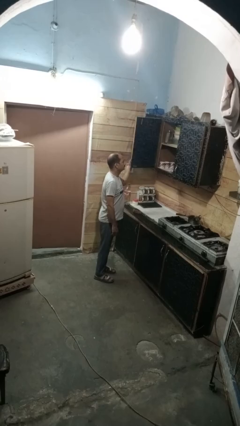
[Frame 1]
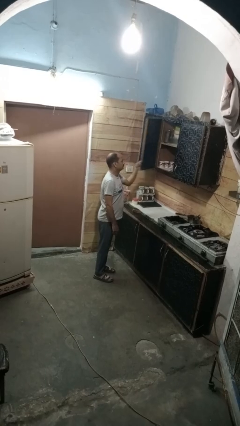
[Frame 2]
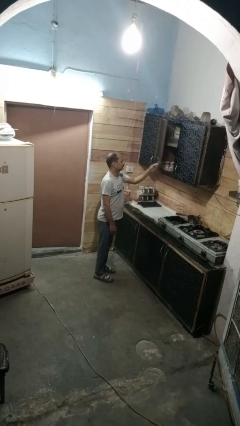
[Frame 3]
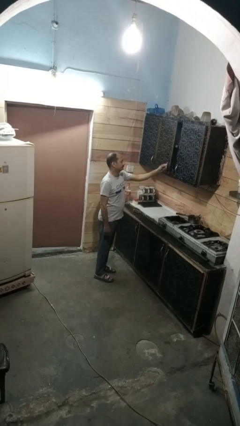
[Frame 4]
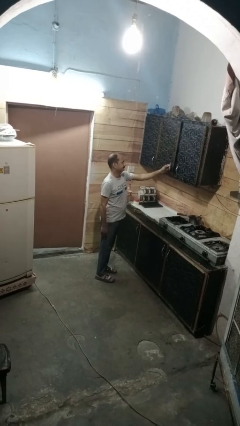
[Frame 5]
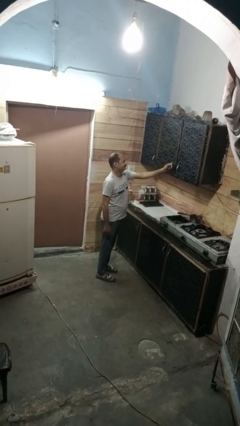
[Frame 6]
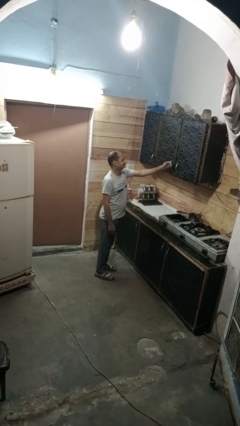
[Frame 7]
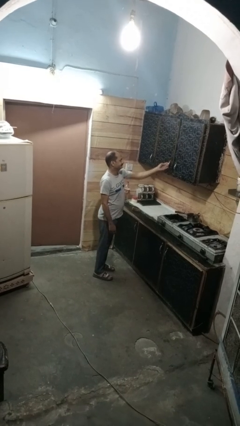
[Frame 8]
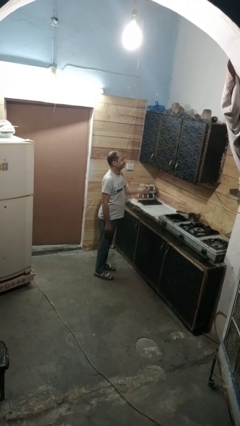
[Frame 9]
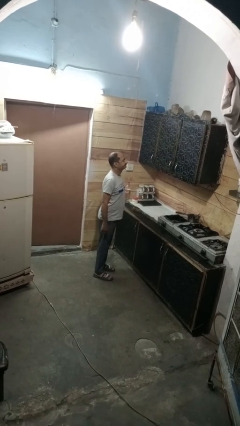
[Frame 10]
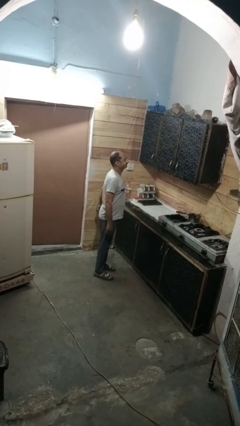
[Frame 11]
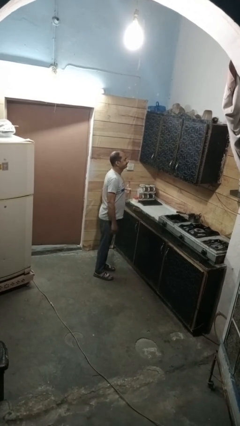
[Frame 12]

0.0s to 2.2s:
person closes cabinet

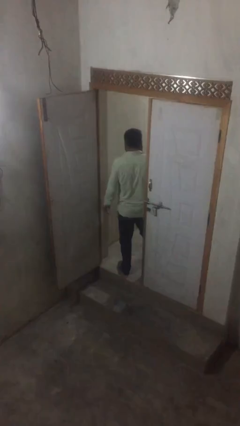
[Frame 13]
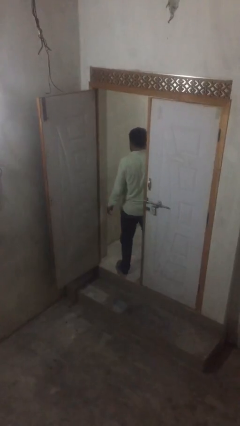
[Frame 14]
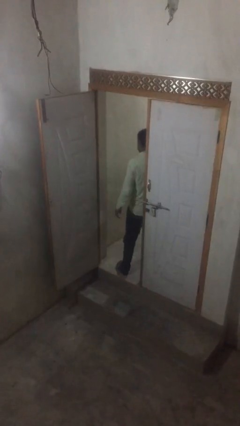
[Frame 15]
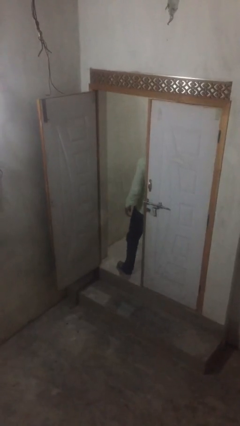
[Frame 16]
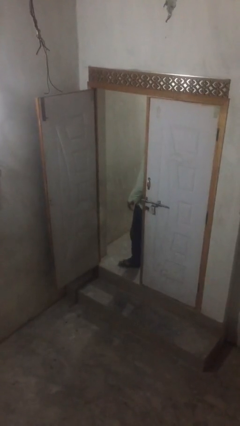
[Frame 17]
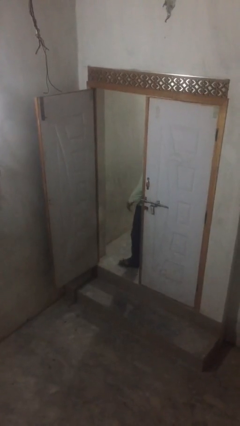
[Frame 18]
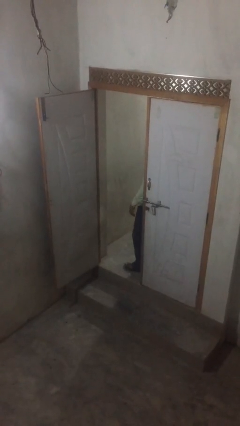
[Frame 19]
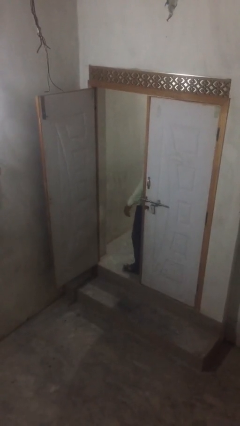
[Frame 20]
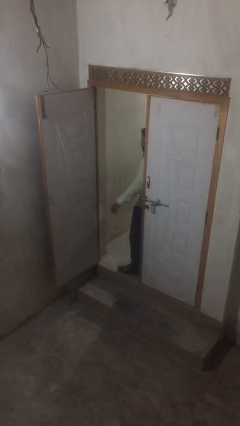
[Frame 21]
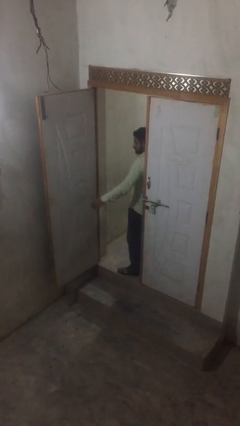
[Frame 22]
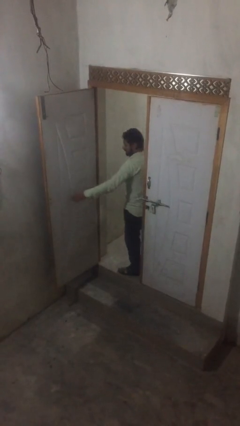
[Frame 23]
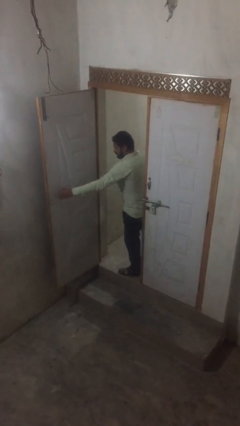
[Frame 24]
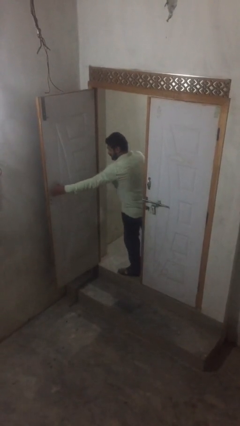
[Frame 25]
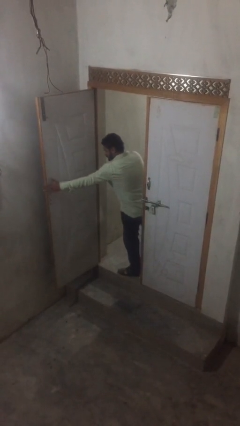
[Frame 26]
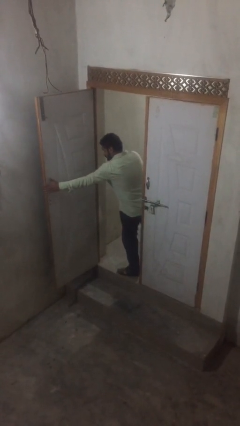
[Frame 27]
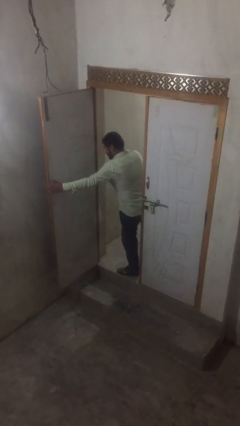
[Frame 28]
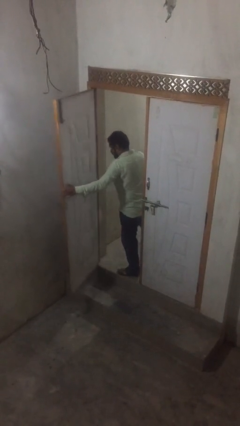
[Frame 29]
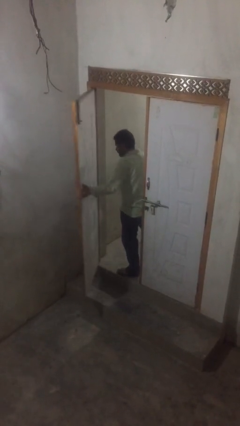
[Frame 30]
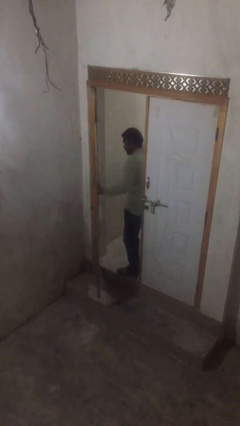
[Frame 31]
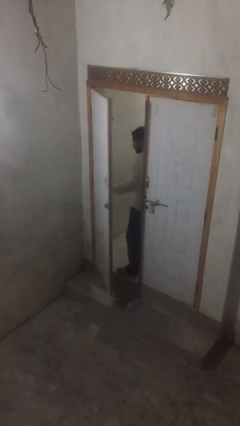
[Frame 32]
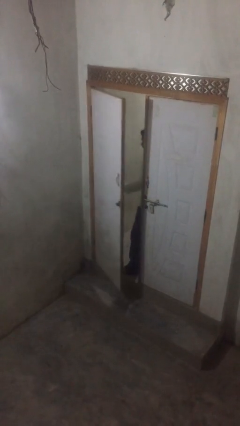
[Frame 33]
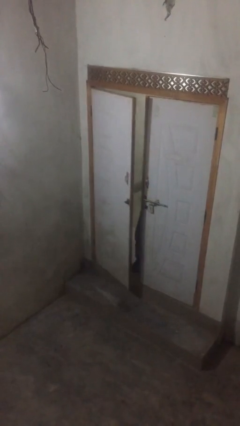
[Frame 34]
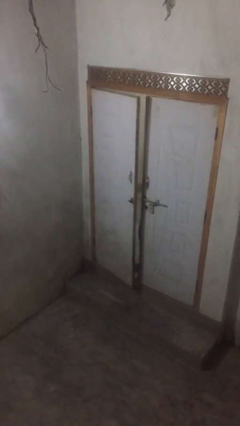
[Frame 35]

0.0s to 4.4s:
person closes facility door

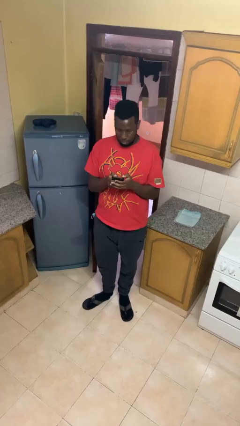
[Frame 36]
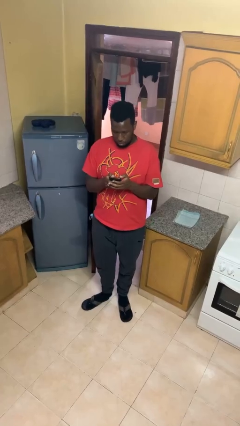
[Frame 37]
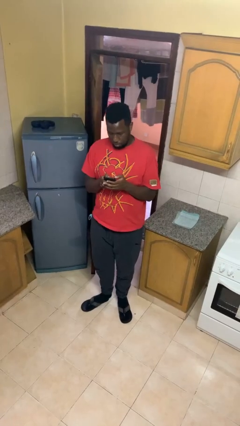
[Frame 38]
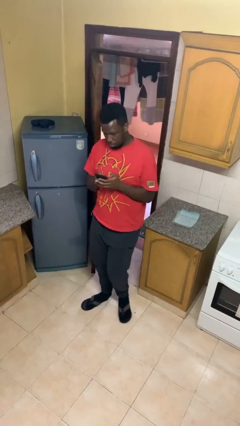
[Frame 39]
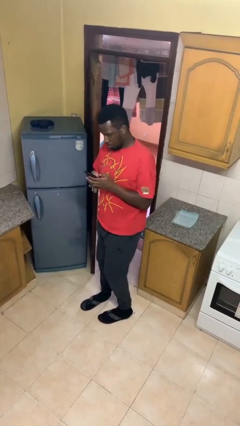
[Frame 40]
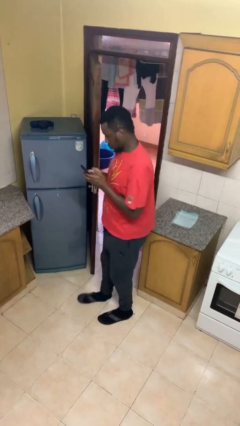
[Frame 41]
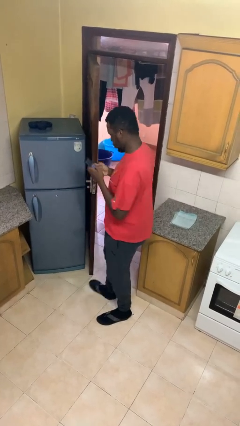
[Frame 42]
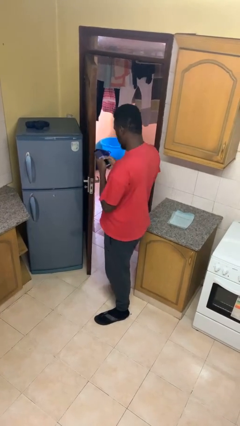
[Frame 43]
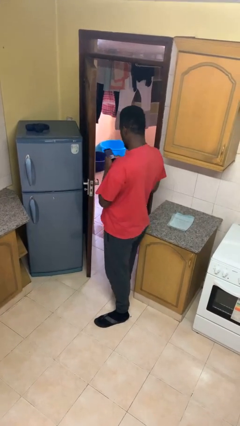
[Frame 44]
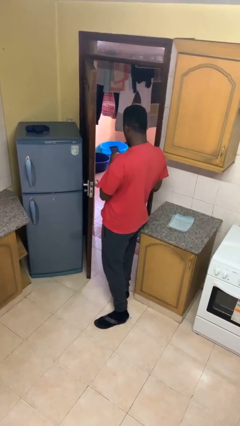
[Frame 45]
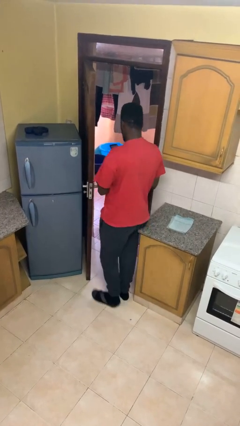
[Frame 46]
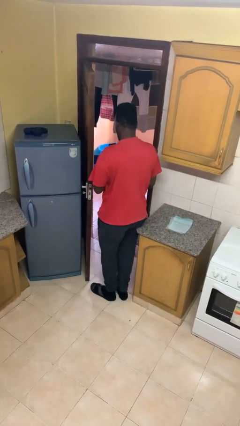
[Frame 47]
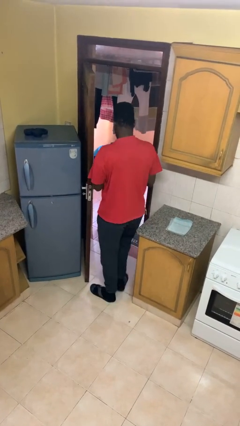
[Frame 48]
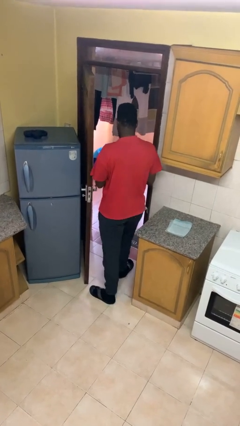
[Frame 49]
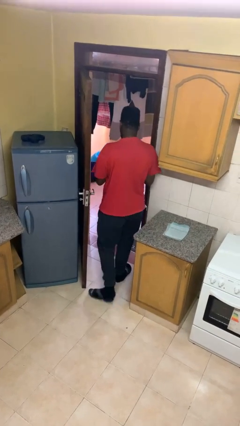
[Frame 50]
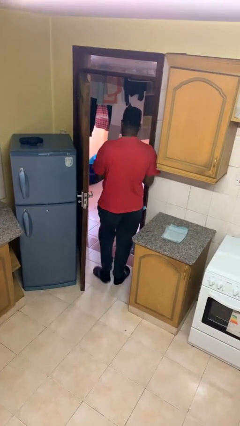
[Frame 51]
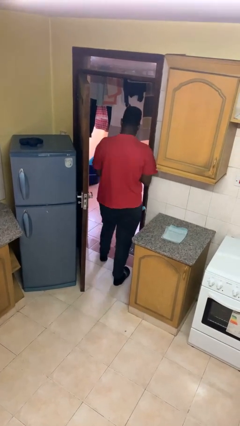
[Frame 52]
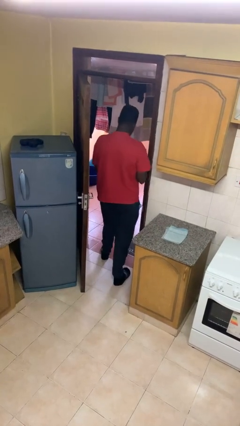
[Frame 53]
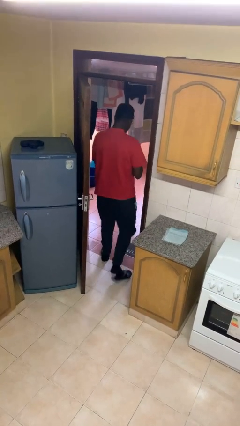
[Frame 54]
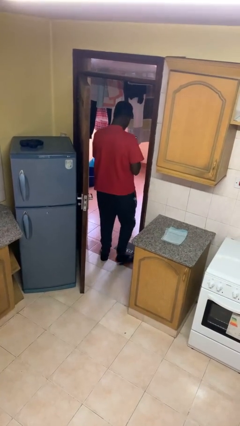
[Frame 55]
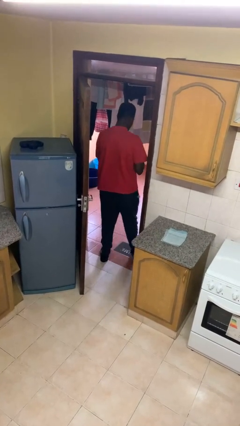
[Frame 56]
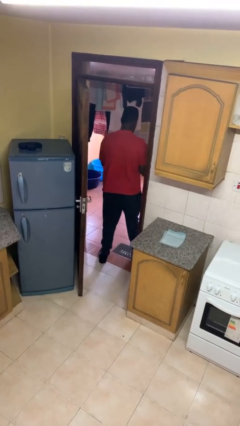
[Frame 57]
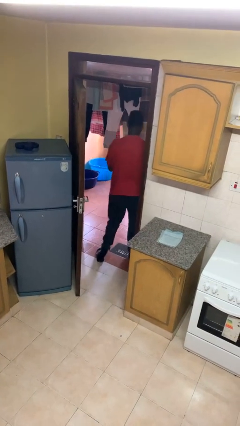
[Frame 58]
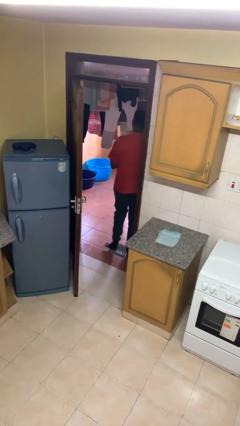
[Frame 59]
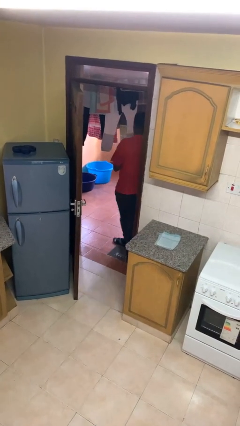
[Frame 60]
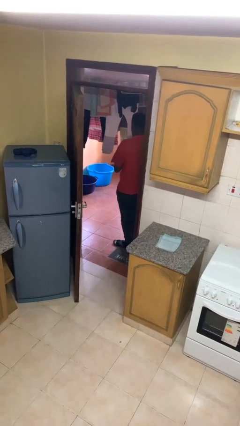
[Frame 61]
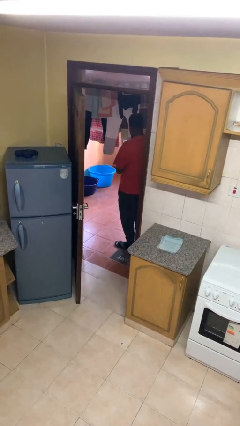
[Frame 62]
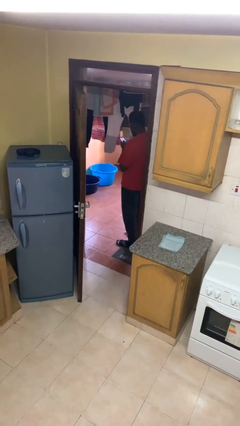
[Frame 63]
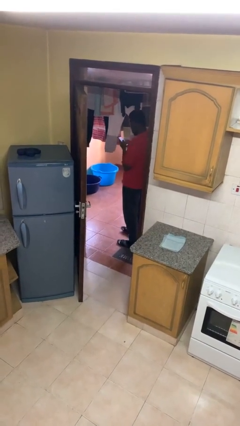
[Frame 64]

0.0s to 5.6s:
person exits scene through structure

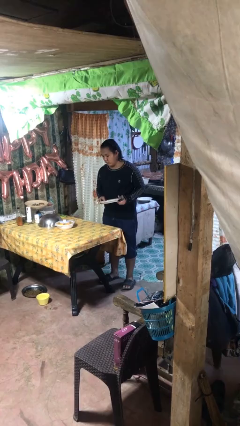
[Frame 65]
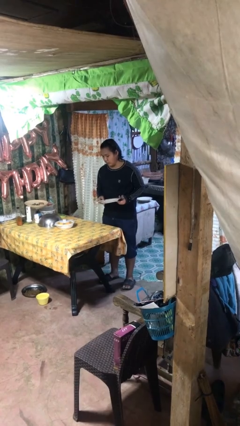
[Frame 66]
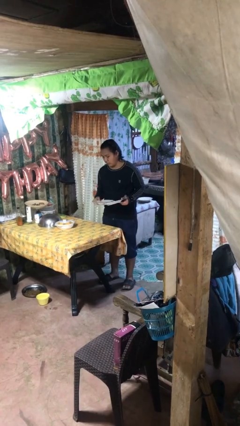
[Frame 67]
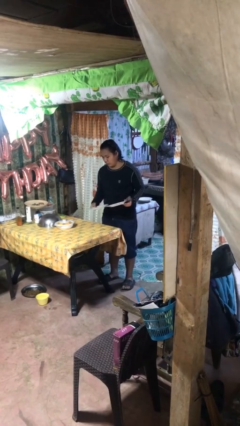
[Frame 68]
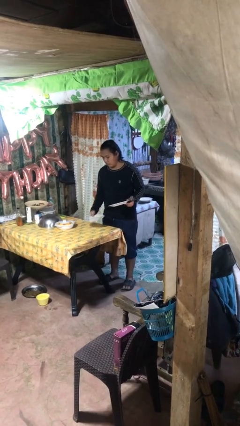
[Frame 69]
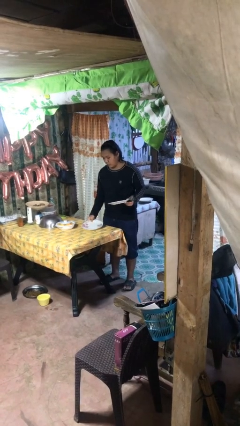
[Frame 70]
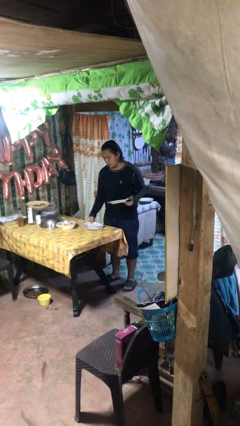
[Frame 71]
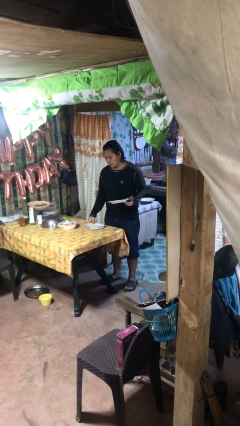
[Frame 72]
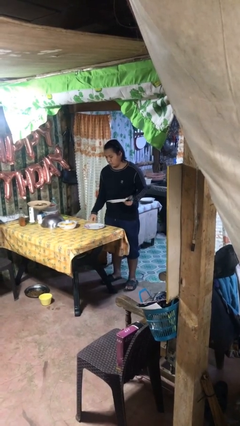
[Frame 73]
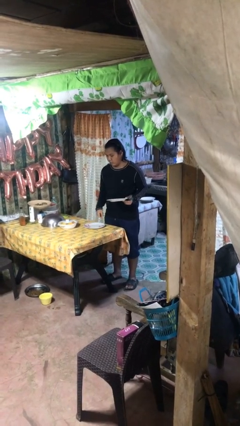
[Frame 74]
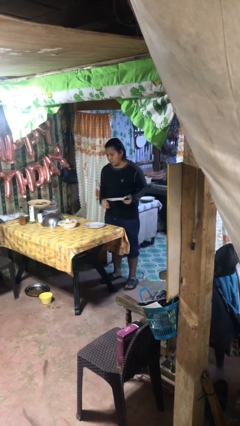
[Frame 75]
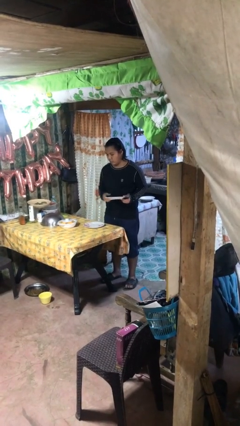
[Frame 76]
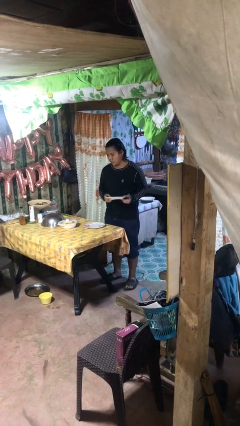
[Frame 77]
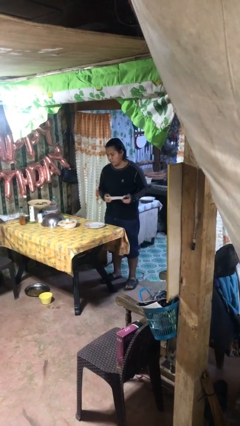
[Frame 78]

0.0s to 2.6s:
person sets table

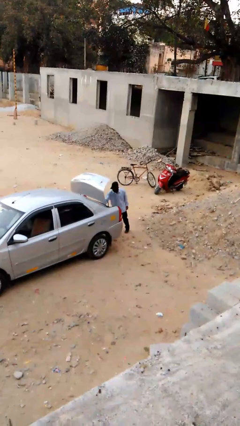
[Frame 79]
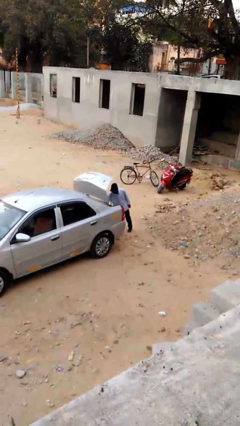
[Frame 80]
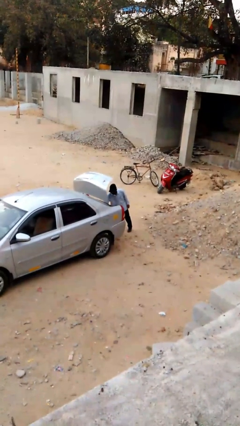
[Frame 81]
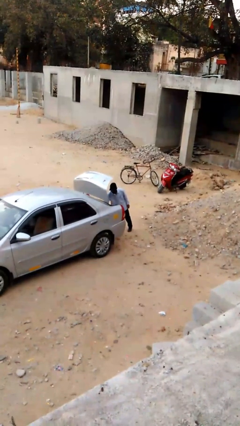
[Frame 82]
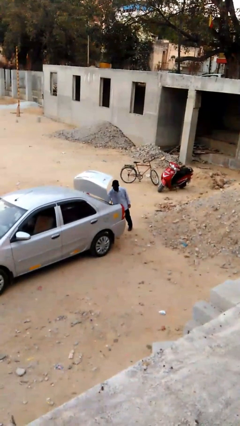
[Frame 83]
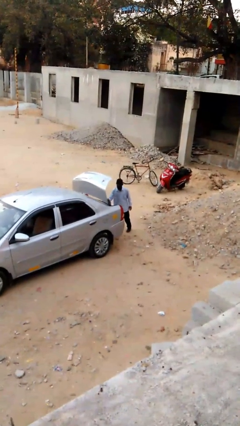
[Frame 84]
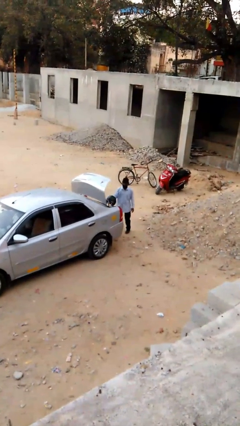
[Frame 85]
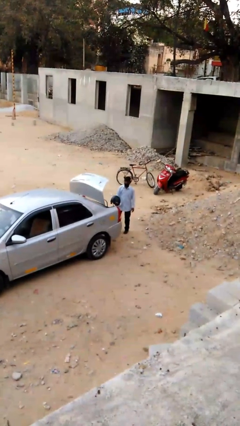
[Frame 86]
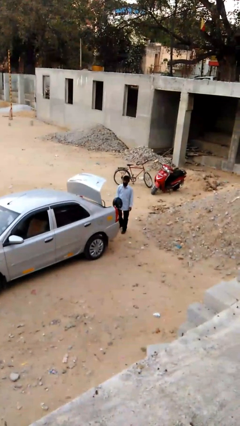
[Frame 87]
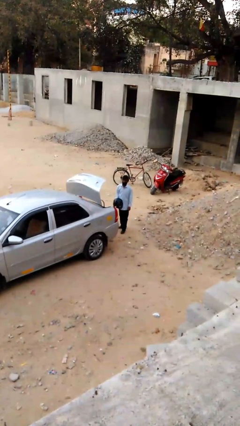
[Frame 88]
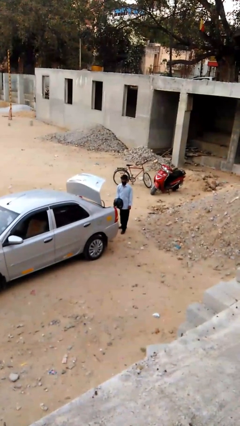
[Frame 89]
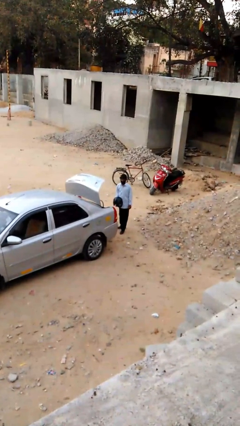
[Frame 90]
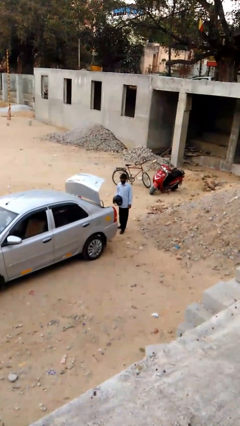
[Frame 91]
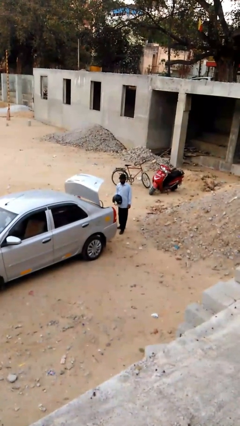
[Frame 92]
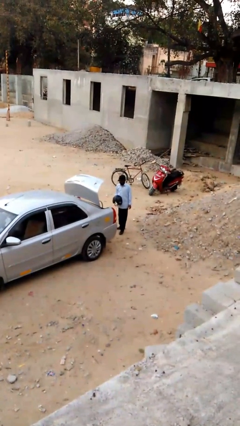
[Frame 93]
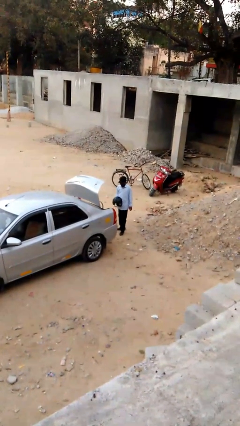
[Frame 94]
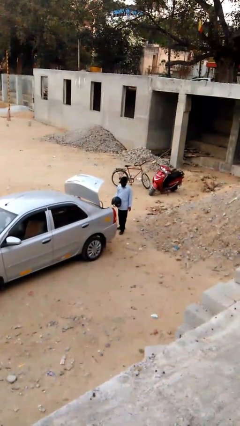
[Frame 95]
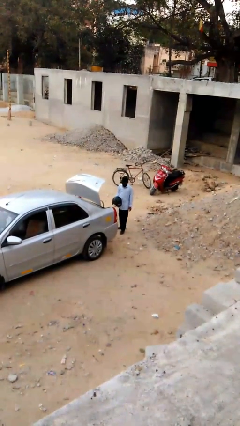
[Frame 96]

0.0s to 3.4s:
person unloads car
